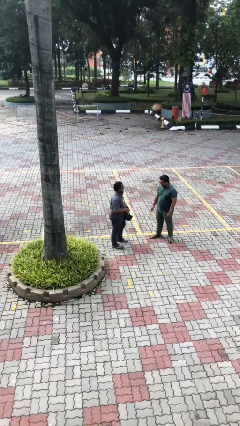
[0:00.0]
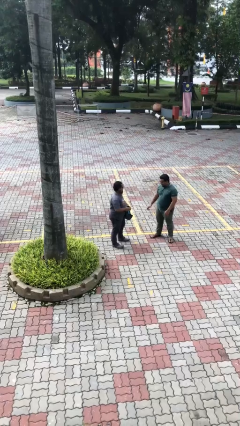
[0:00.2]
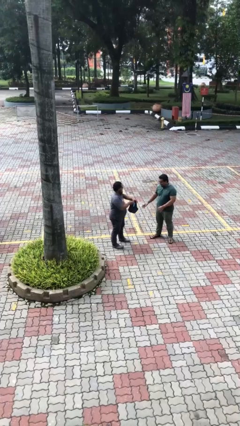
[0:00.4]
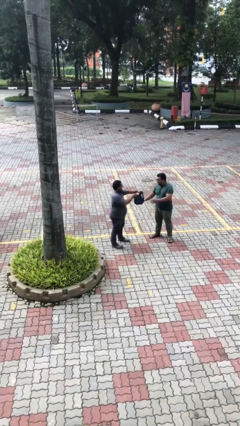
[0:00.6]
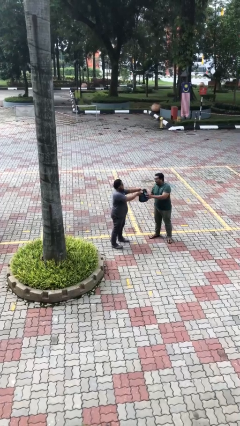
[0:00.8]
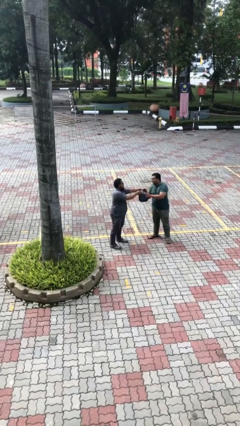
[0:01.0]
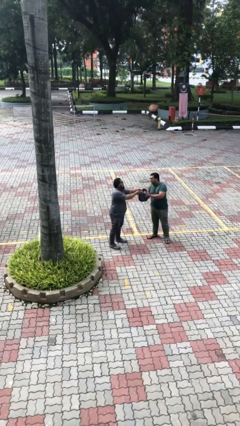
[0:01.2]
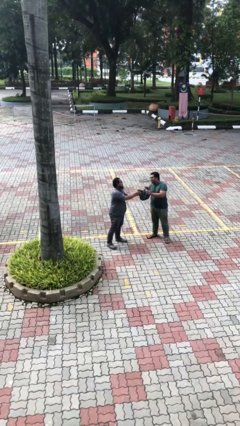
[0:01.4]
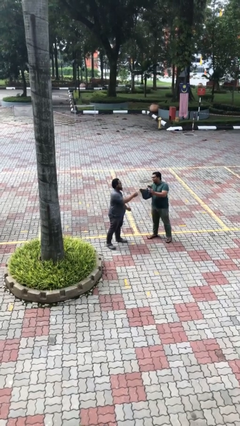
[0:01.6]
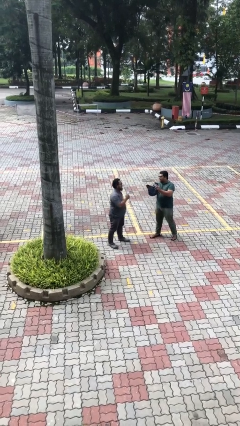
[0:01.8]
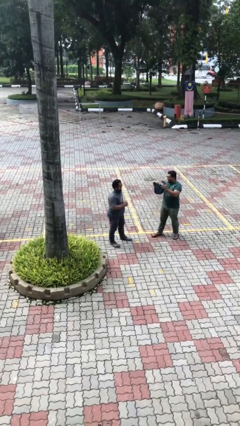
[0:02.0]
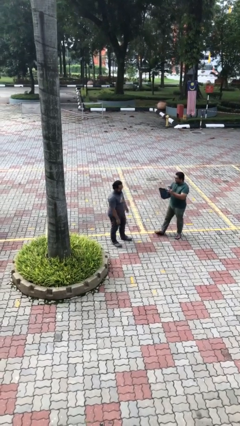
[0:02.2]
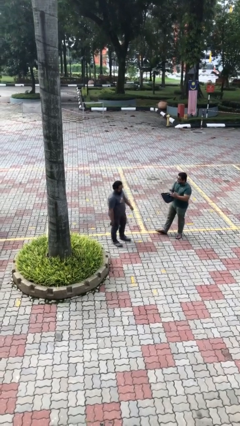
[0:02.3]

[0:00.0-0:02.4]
person transfers object to person

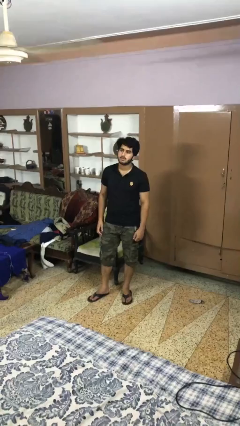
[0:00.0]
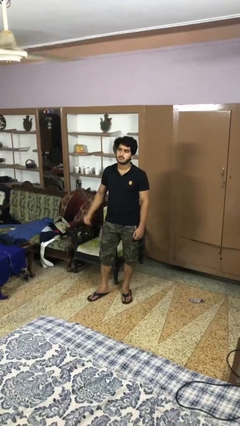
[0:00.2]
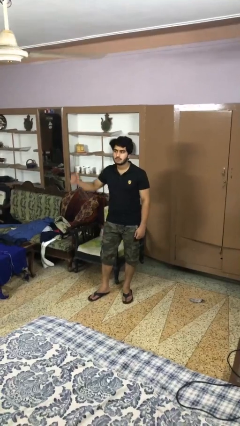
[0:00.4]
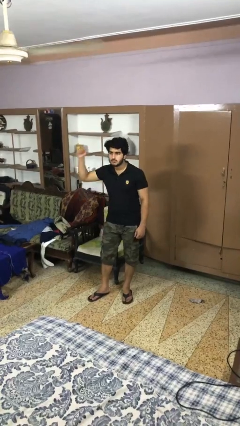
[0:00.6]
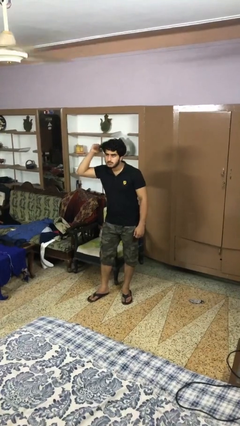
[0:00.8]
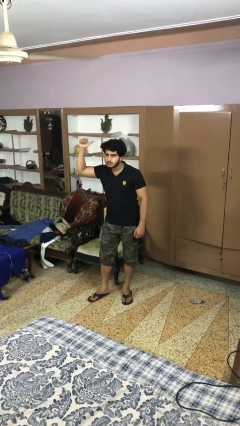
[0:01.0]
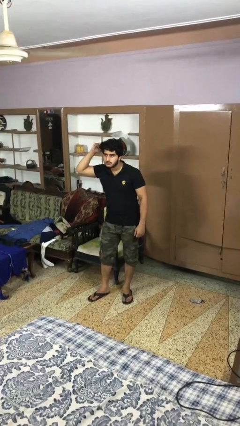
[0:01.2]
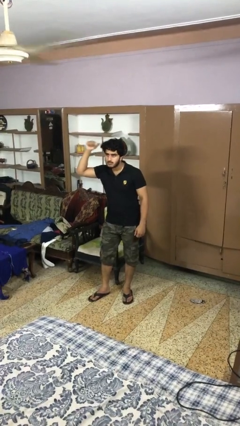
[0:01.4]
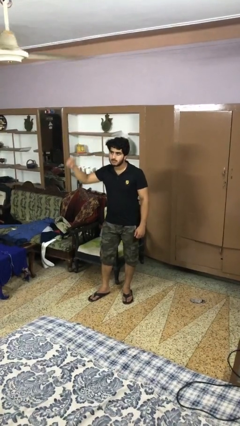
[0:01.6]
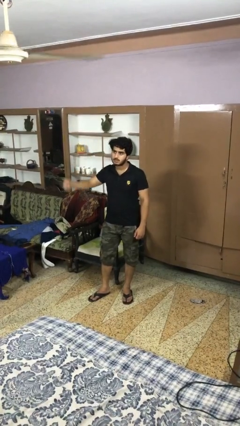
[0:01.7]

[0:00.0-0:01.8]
person gestures behind me

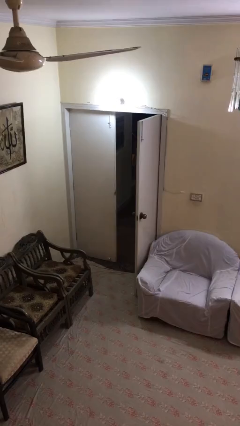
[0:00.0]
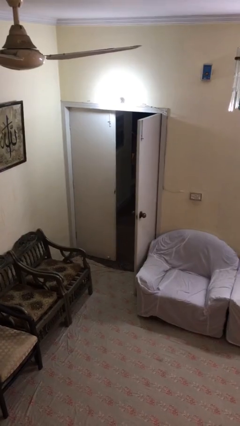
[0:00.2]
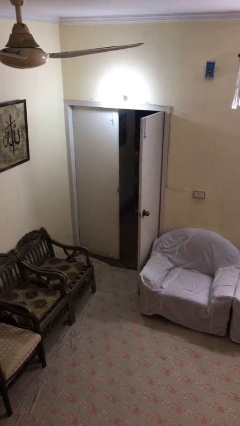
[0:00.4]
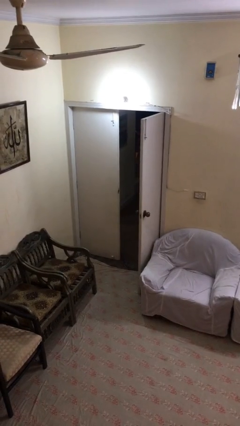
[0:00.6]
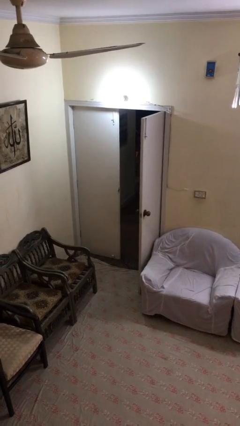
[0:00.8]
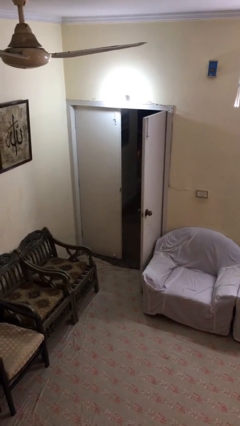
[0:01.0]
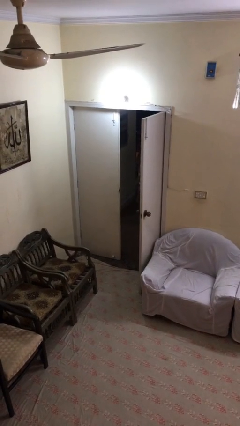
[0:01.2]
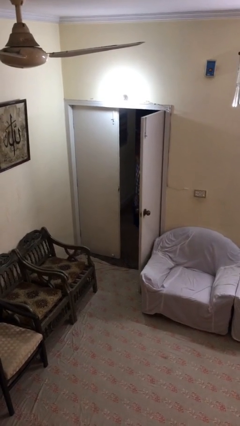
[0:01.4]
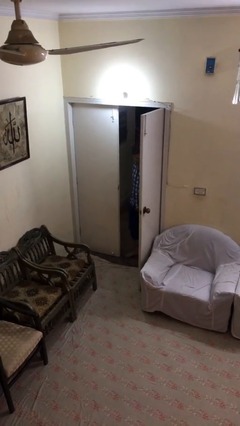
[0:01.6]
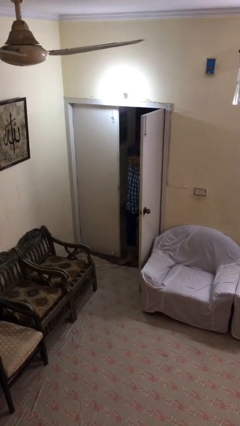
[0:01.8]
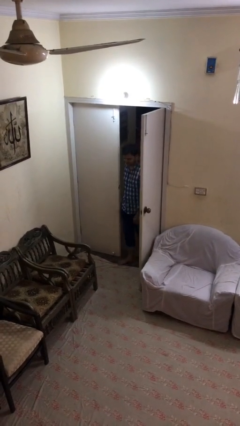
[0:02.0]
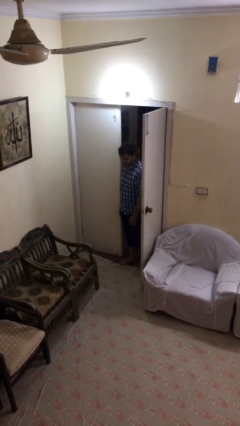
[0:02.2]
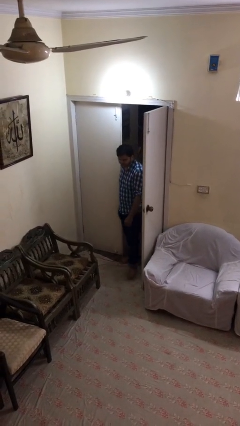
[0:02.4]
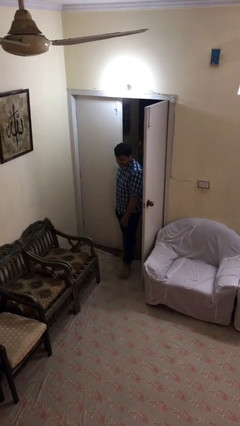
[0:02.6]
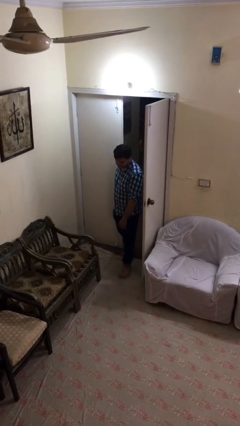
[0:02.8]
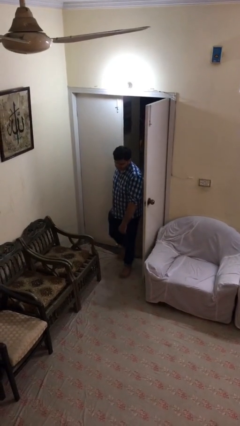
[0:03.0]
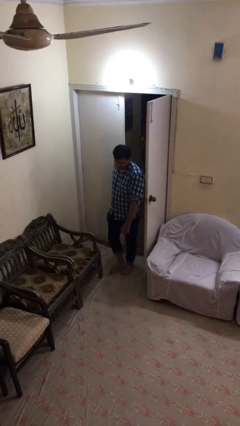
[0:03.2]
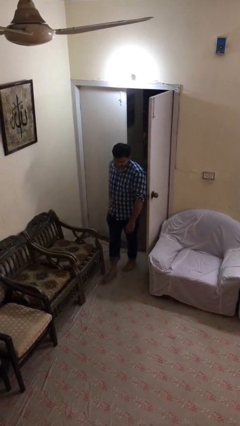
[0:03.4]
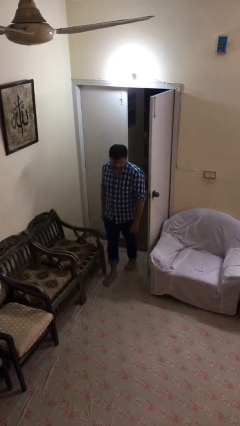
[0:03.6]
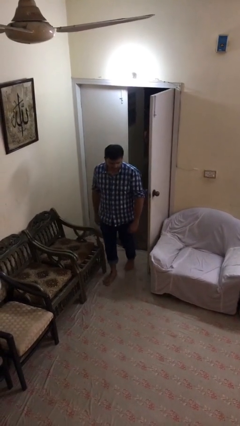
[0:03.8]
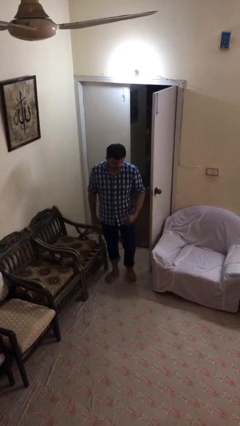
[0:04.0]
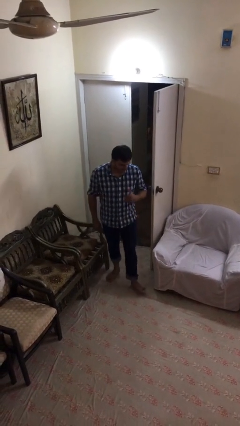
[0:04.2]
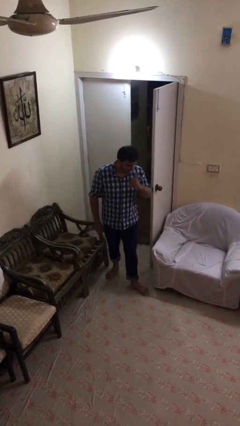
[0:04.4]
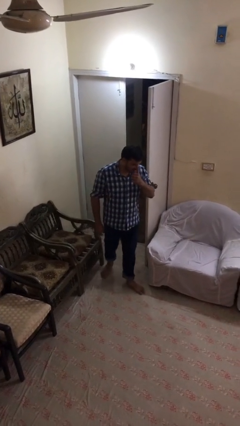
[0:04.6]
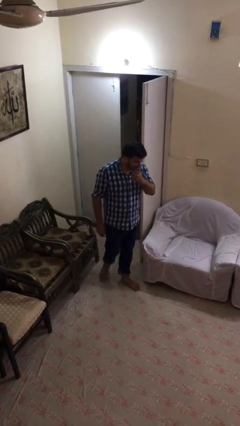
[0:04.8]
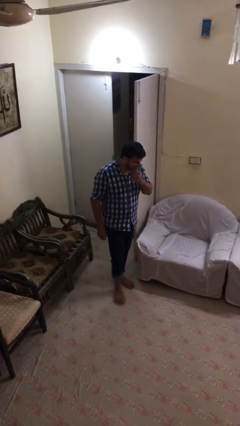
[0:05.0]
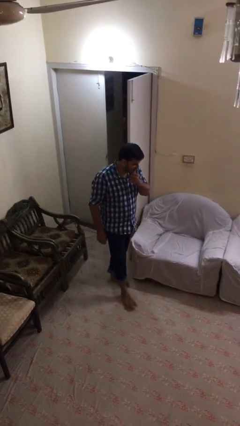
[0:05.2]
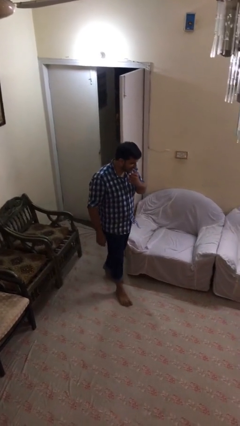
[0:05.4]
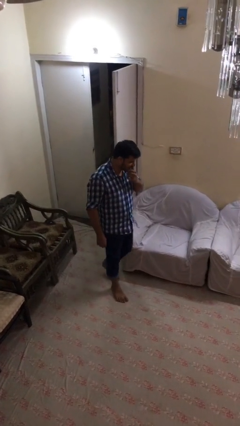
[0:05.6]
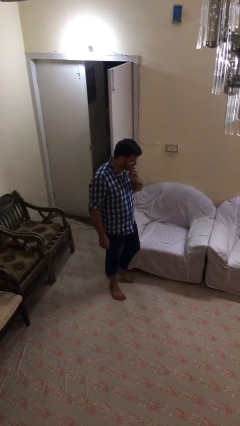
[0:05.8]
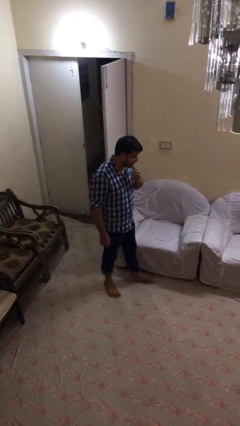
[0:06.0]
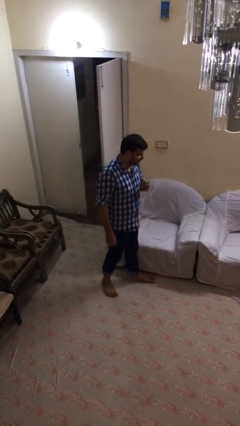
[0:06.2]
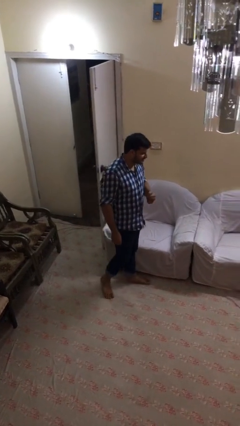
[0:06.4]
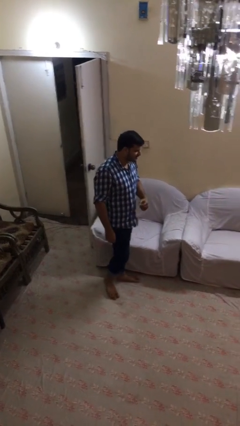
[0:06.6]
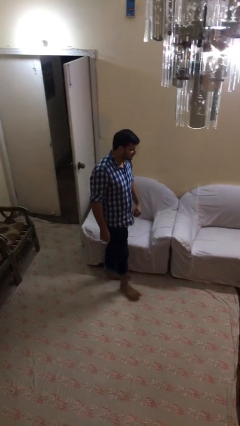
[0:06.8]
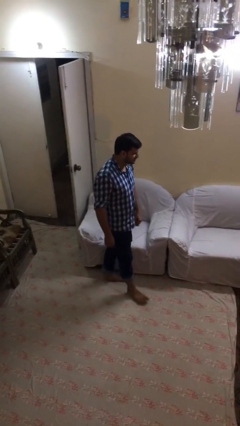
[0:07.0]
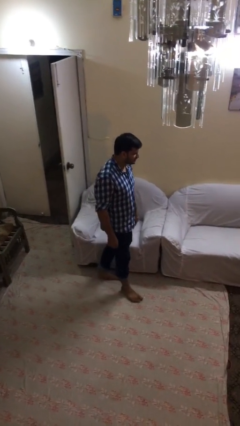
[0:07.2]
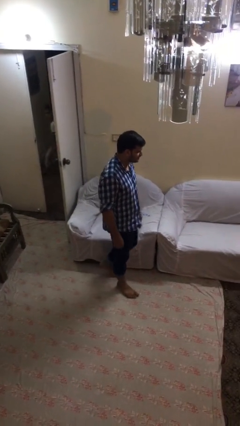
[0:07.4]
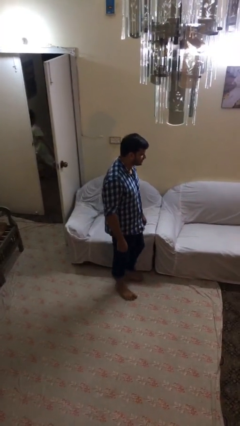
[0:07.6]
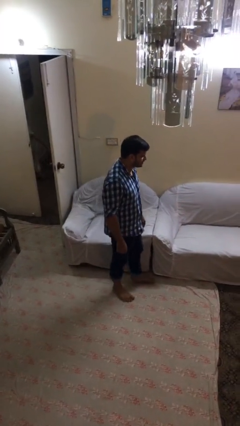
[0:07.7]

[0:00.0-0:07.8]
person enters scene through structure

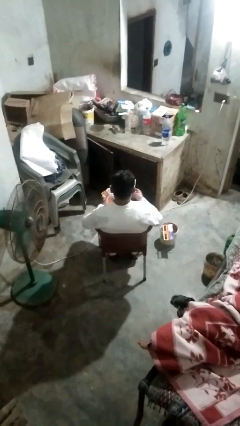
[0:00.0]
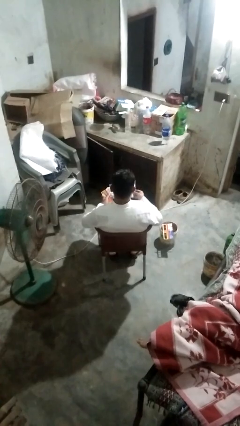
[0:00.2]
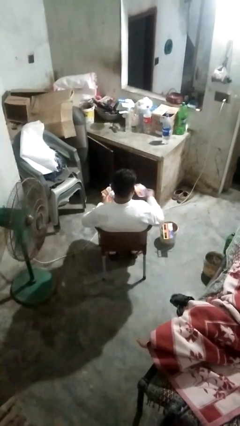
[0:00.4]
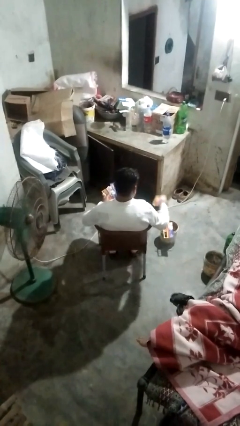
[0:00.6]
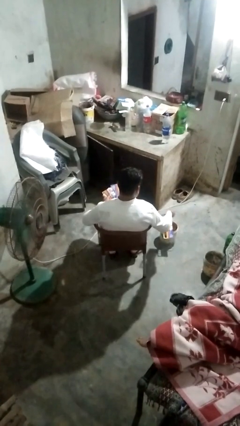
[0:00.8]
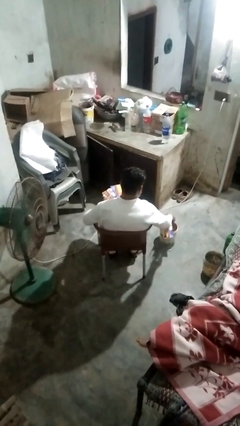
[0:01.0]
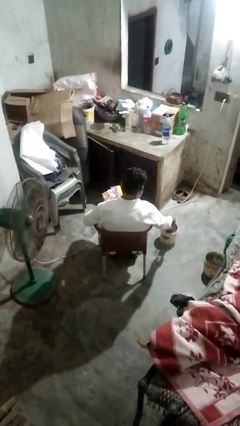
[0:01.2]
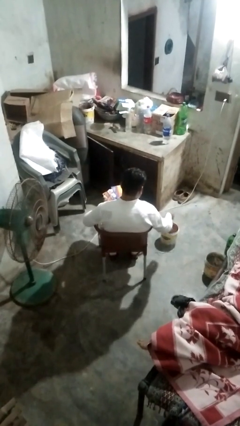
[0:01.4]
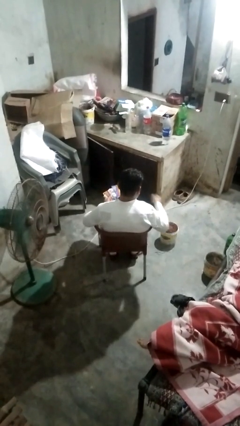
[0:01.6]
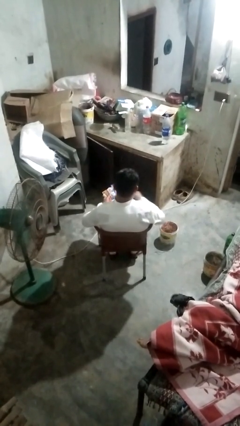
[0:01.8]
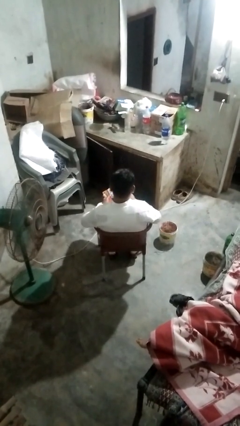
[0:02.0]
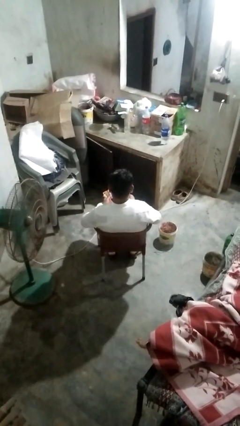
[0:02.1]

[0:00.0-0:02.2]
person discards trash

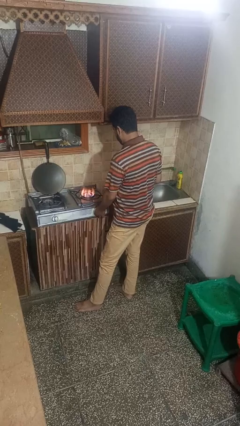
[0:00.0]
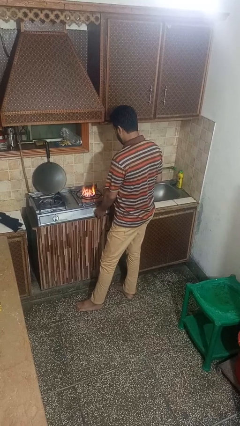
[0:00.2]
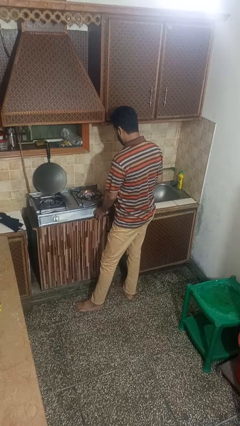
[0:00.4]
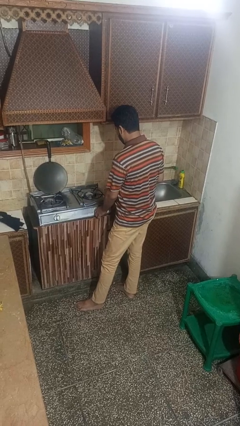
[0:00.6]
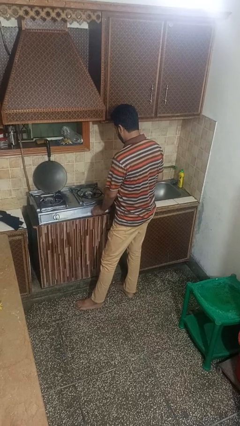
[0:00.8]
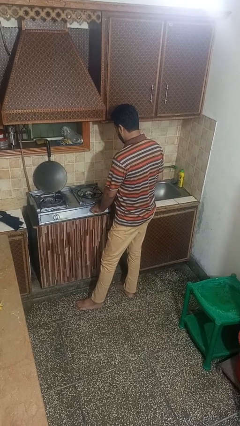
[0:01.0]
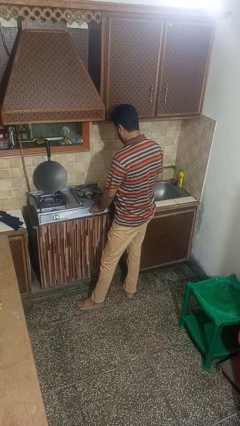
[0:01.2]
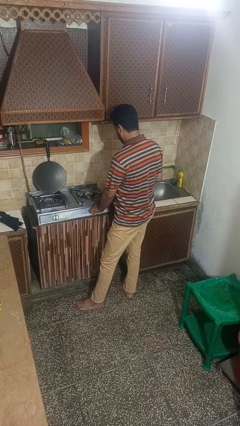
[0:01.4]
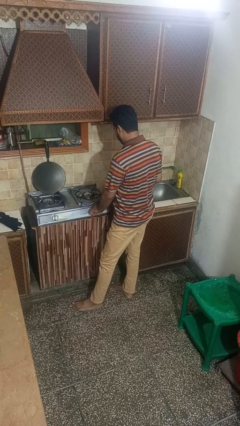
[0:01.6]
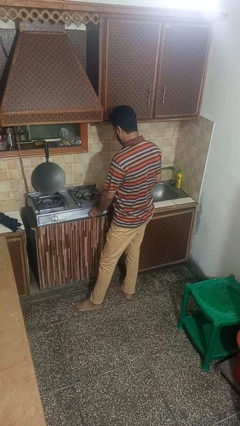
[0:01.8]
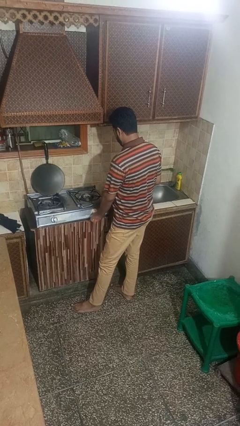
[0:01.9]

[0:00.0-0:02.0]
person turns off stovetop
